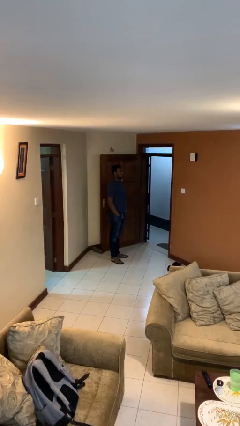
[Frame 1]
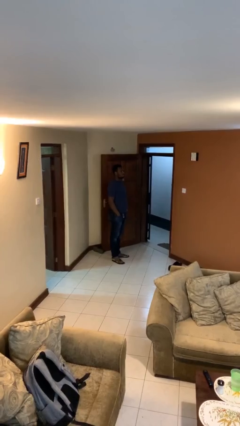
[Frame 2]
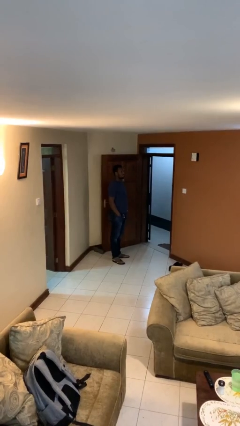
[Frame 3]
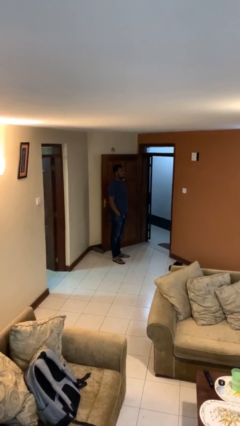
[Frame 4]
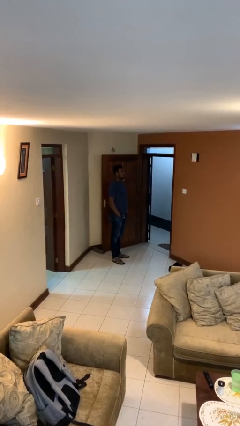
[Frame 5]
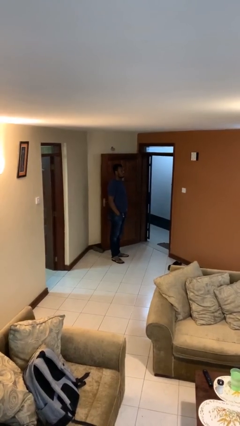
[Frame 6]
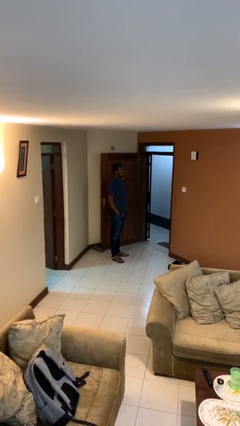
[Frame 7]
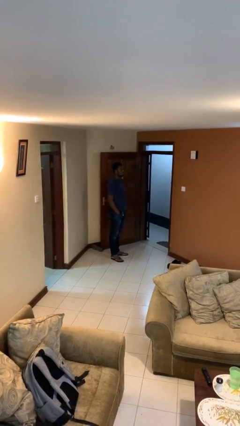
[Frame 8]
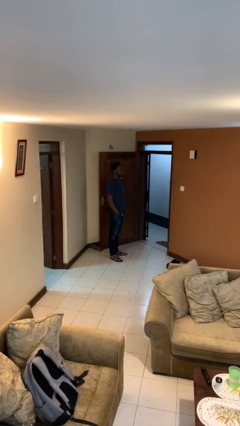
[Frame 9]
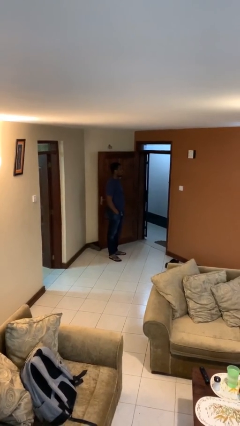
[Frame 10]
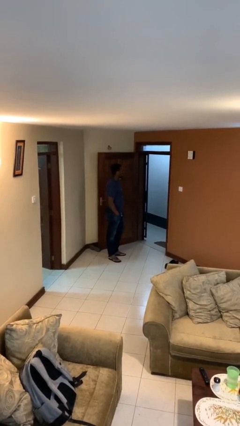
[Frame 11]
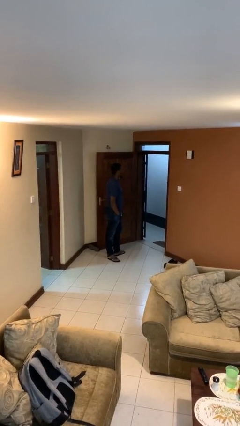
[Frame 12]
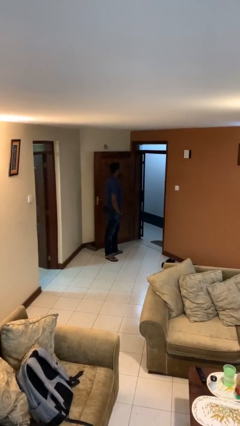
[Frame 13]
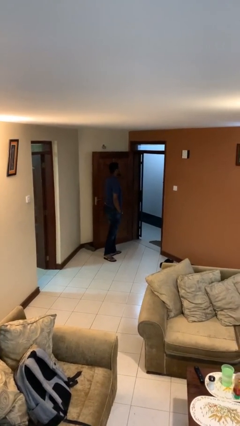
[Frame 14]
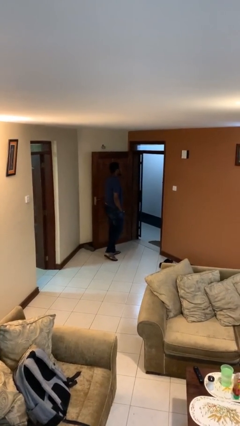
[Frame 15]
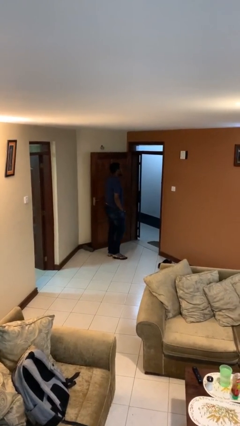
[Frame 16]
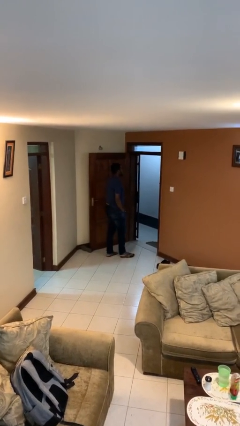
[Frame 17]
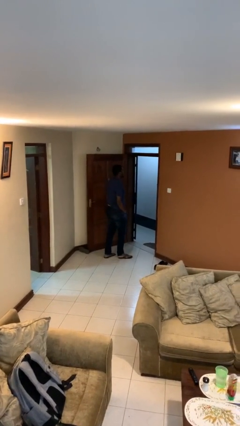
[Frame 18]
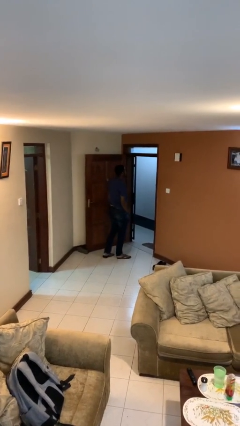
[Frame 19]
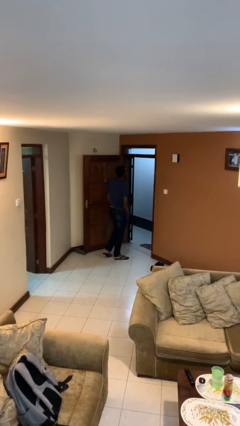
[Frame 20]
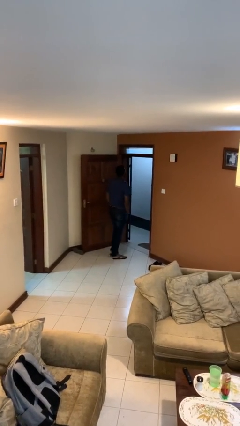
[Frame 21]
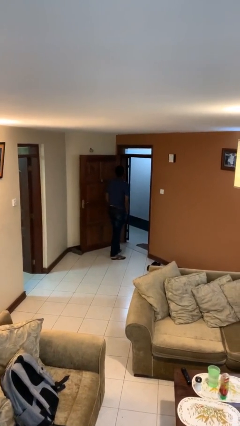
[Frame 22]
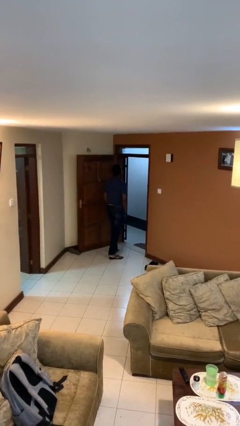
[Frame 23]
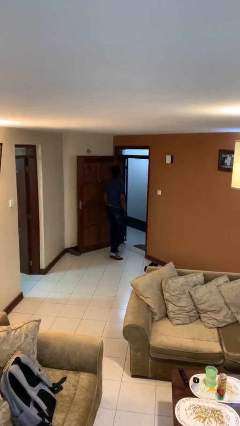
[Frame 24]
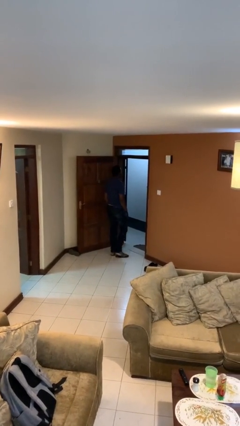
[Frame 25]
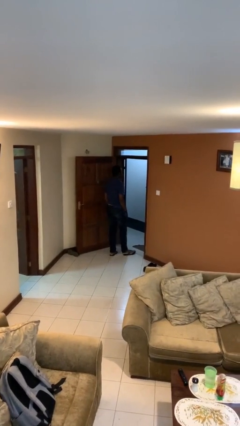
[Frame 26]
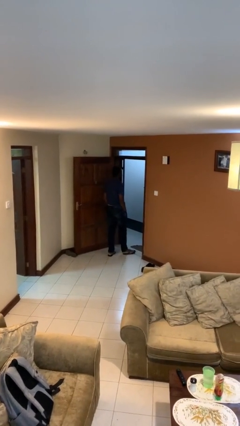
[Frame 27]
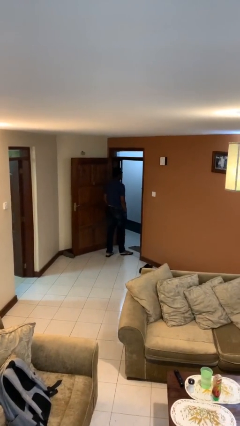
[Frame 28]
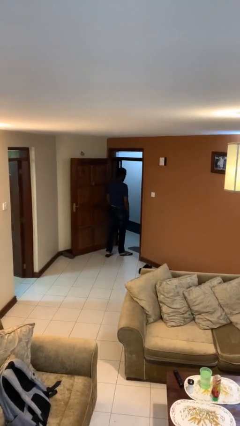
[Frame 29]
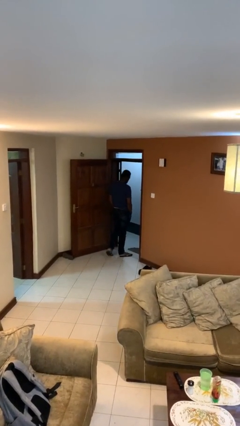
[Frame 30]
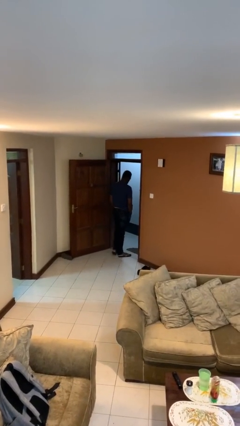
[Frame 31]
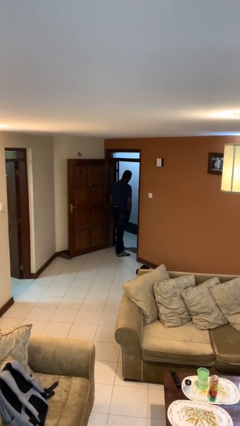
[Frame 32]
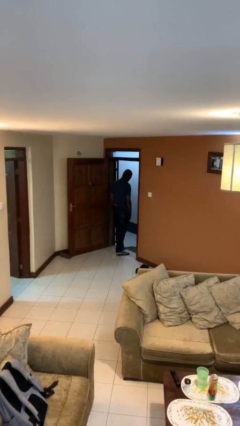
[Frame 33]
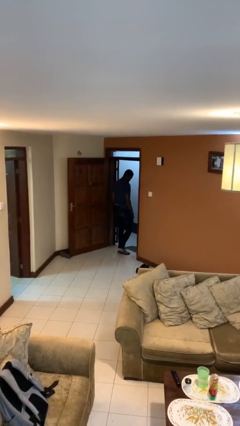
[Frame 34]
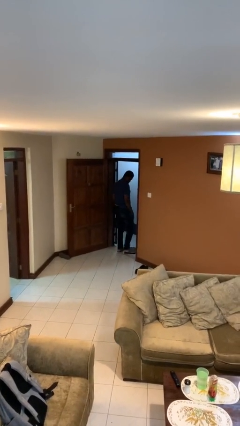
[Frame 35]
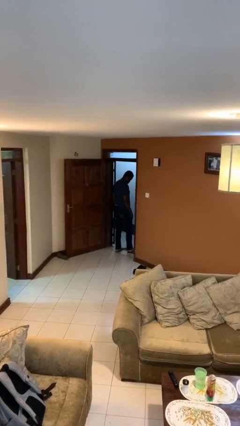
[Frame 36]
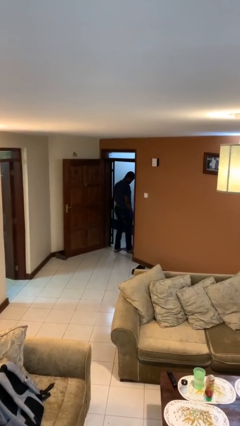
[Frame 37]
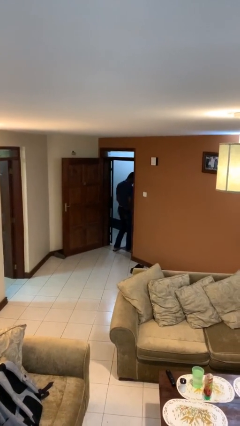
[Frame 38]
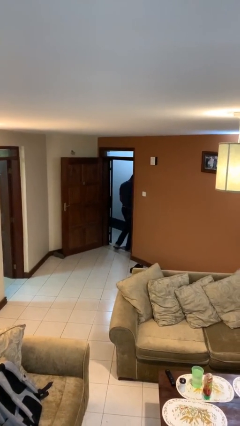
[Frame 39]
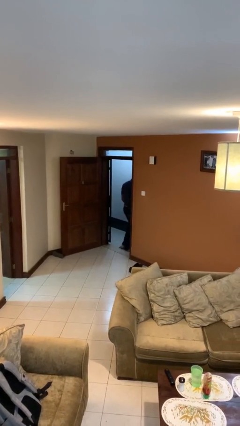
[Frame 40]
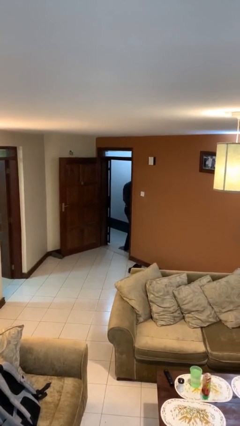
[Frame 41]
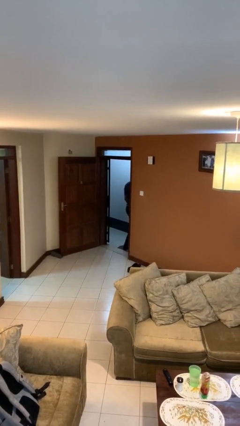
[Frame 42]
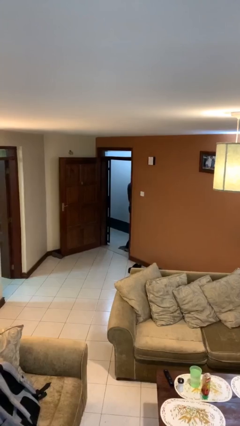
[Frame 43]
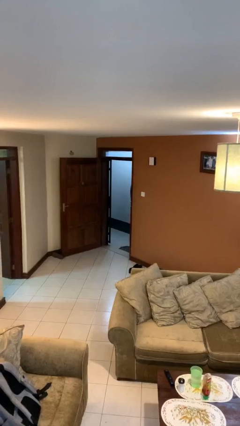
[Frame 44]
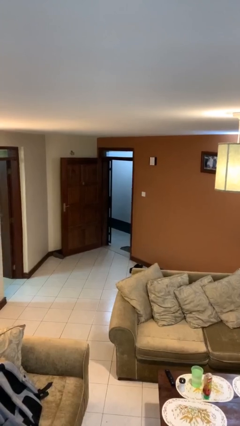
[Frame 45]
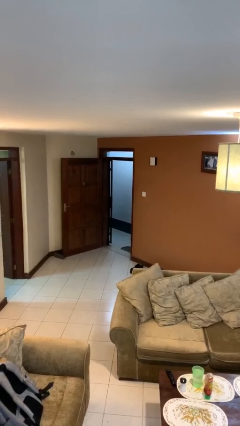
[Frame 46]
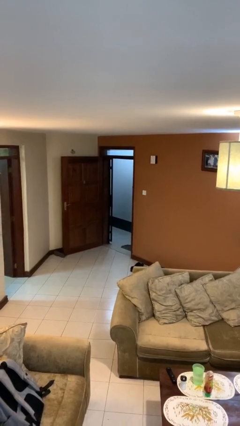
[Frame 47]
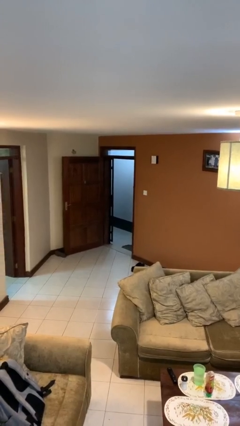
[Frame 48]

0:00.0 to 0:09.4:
person exits scene through structure

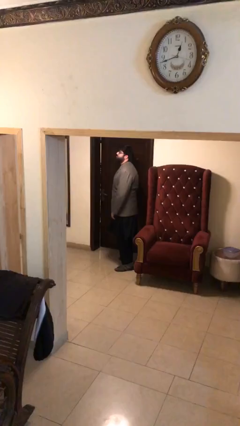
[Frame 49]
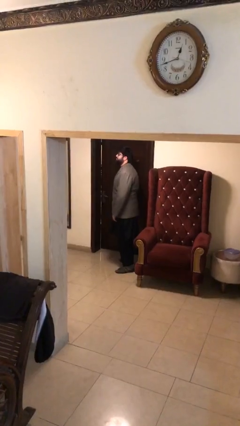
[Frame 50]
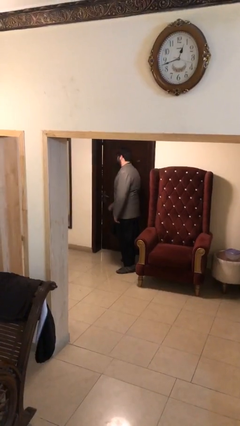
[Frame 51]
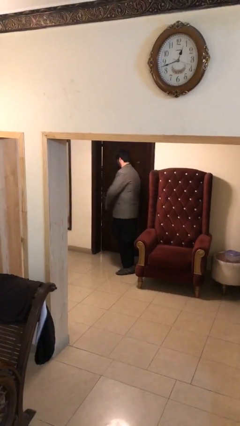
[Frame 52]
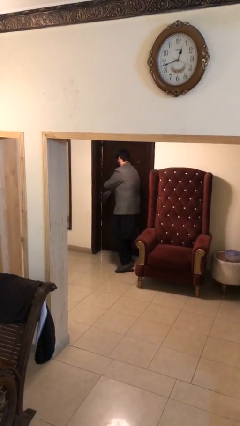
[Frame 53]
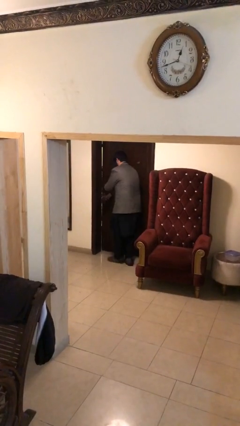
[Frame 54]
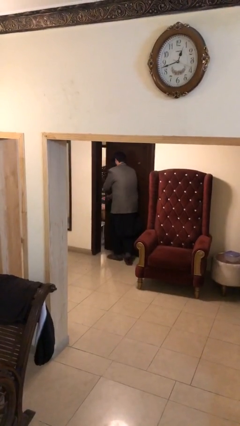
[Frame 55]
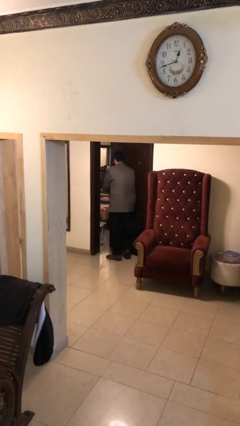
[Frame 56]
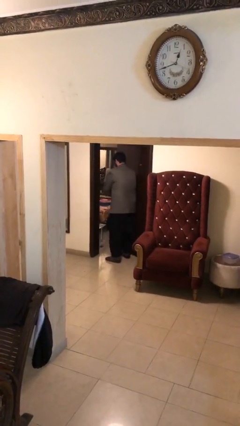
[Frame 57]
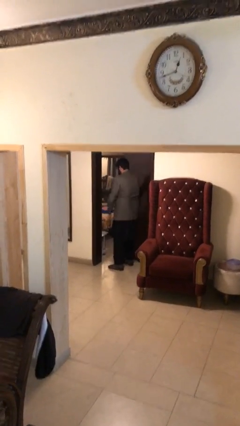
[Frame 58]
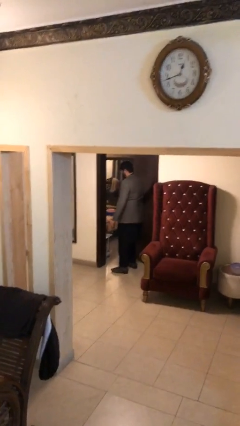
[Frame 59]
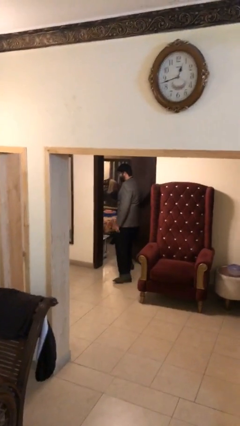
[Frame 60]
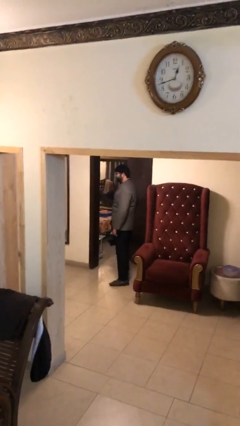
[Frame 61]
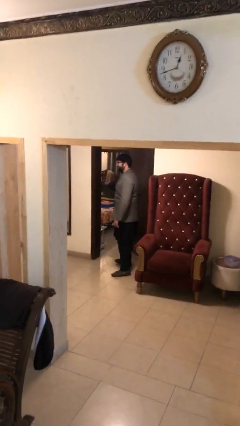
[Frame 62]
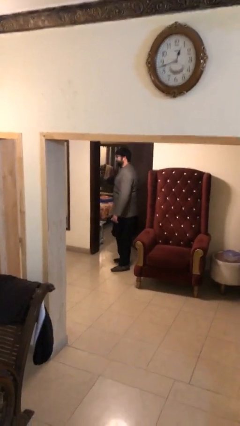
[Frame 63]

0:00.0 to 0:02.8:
person opens facility door

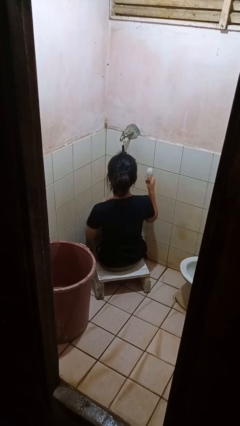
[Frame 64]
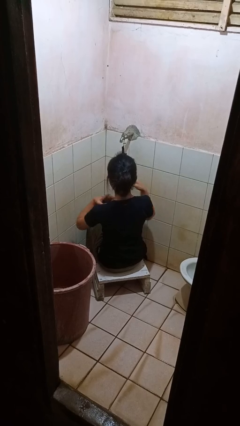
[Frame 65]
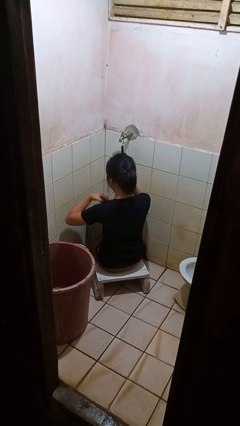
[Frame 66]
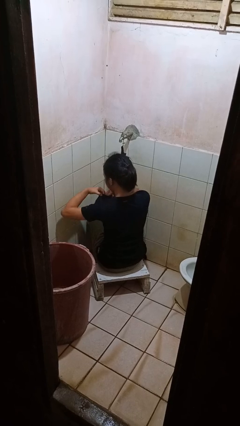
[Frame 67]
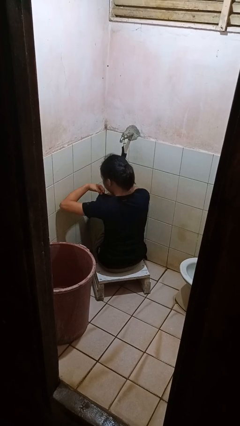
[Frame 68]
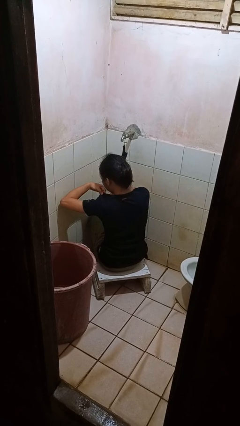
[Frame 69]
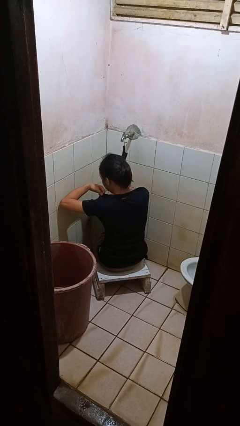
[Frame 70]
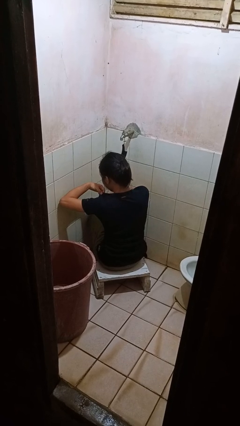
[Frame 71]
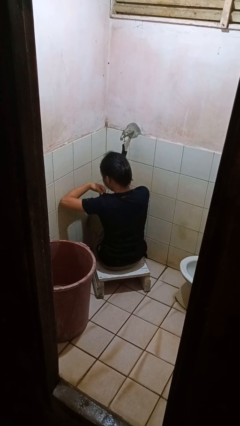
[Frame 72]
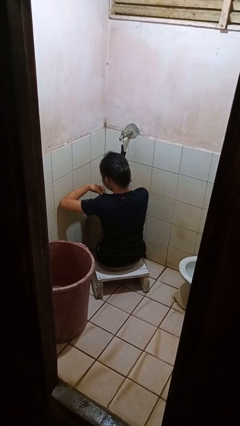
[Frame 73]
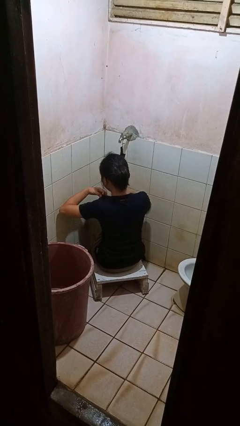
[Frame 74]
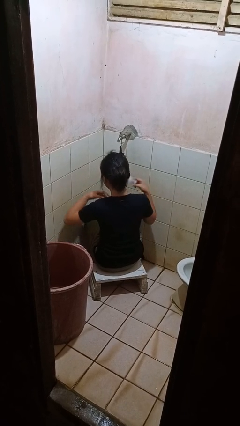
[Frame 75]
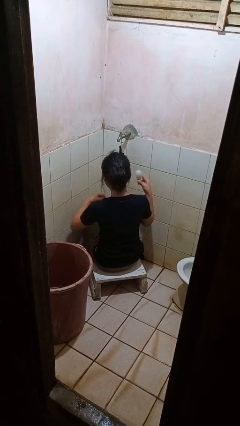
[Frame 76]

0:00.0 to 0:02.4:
person applies deodorant

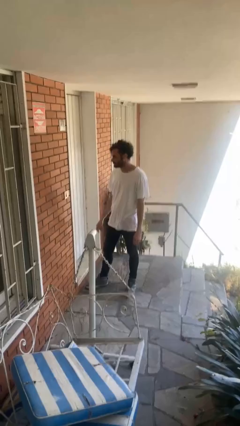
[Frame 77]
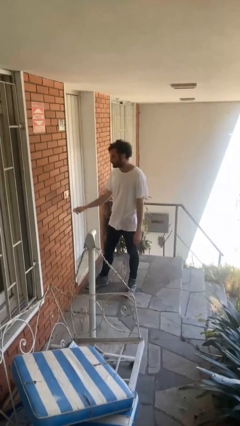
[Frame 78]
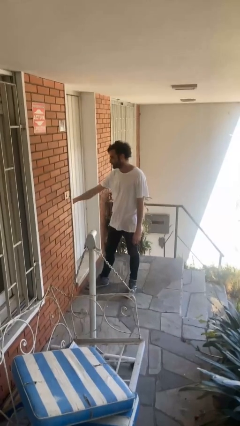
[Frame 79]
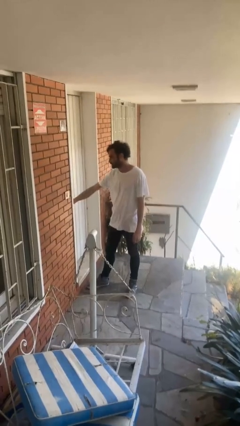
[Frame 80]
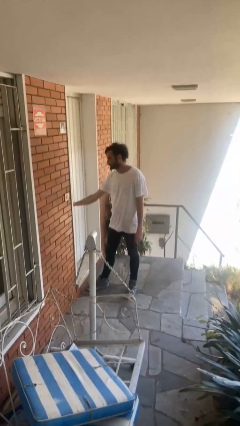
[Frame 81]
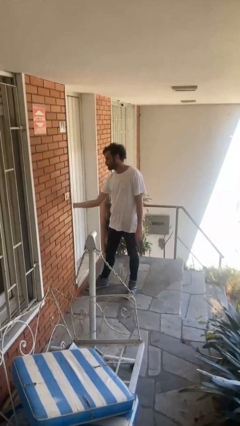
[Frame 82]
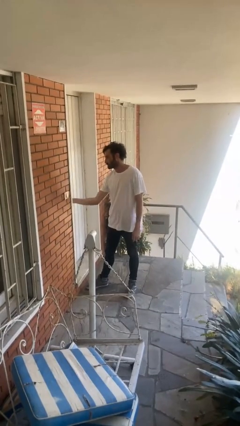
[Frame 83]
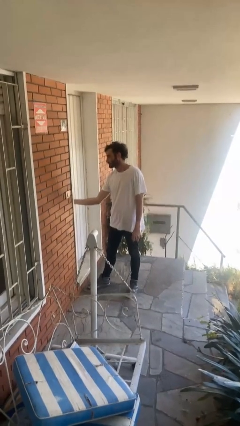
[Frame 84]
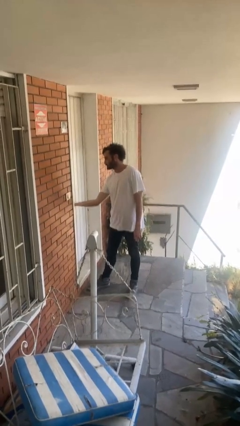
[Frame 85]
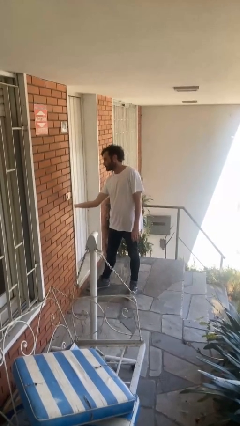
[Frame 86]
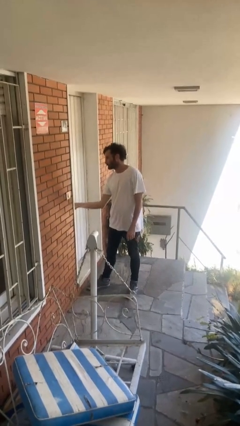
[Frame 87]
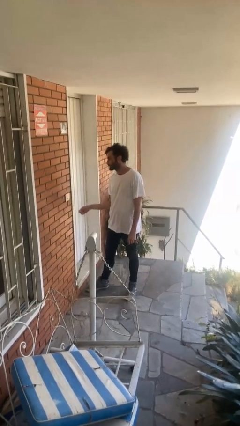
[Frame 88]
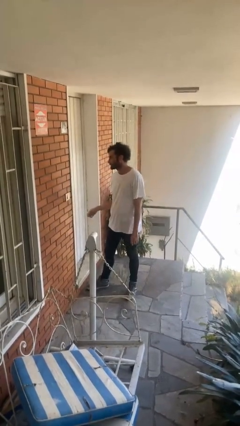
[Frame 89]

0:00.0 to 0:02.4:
person unlocks door with keys

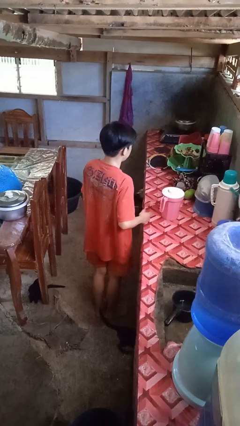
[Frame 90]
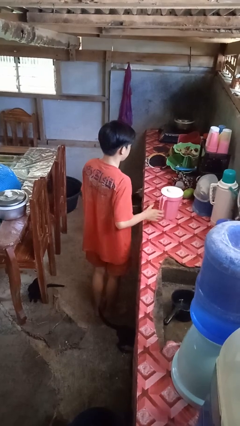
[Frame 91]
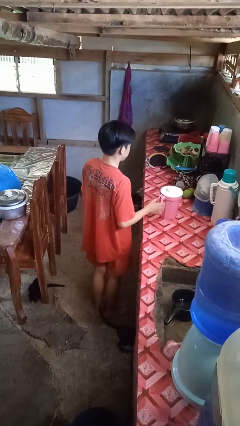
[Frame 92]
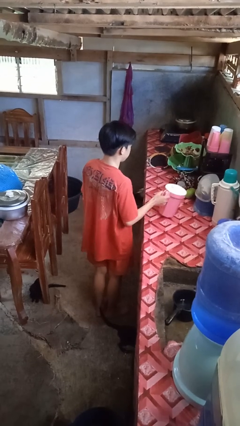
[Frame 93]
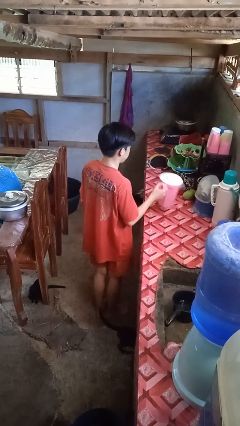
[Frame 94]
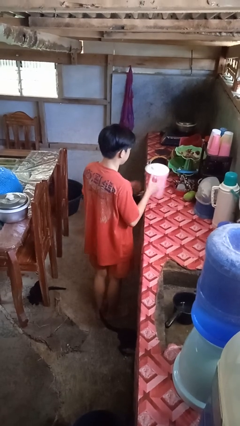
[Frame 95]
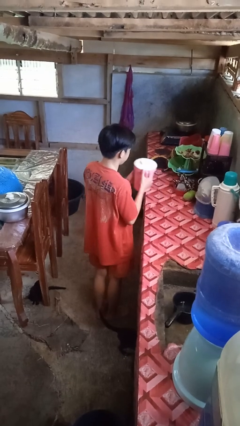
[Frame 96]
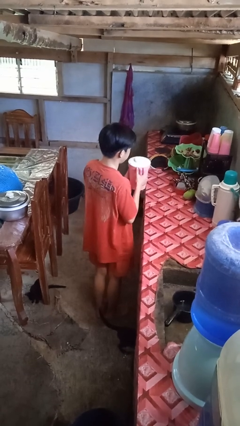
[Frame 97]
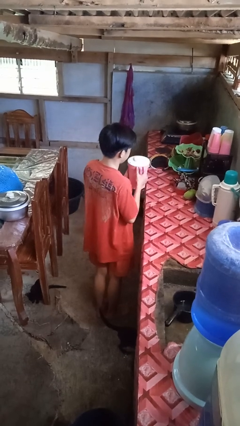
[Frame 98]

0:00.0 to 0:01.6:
person picks up object from countertop
